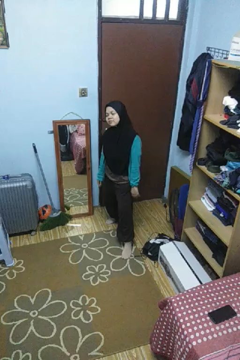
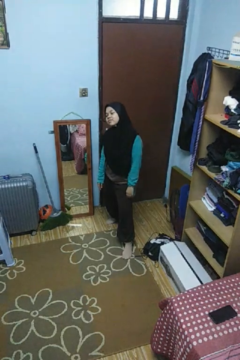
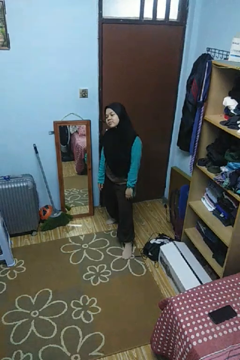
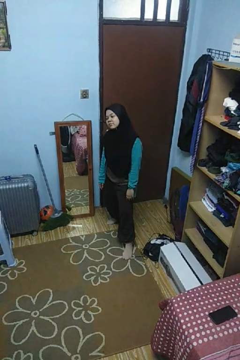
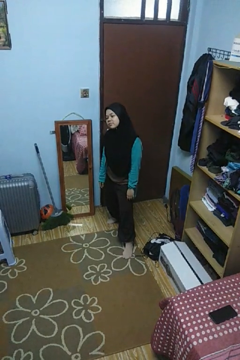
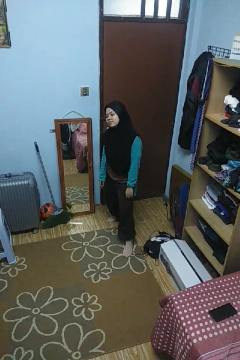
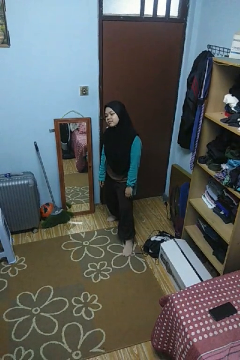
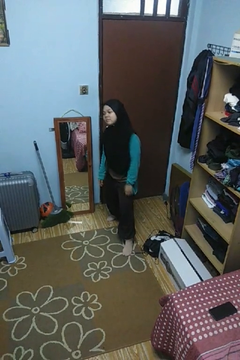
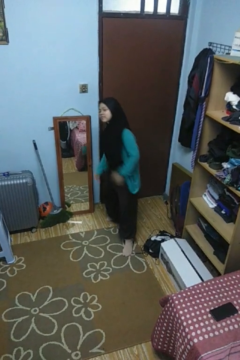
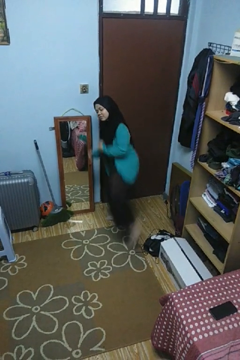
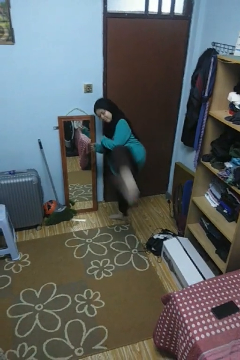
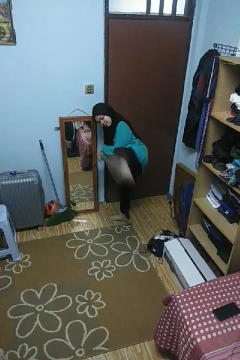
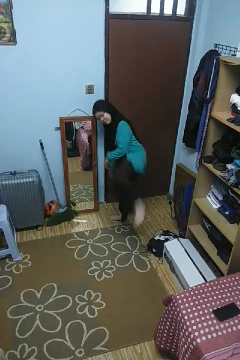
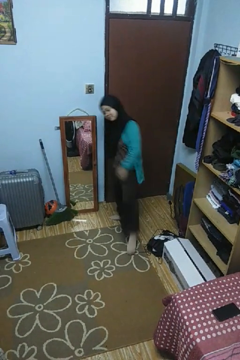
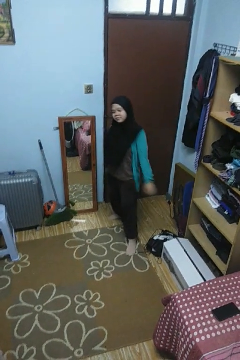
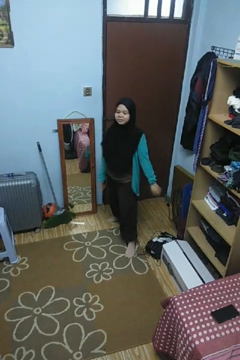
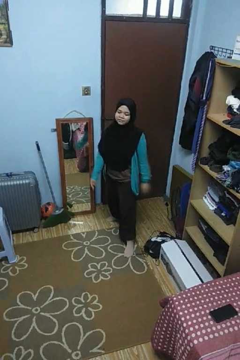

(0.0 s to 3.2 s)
person karate kicks

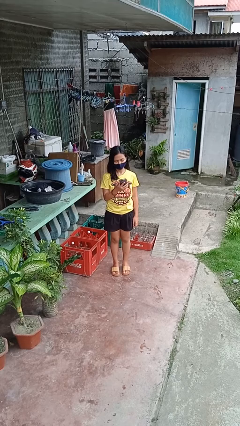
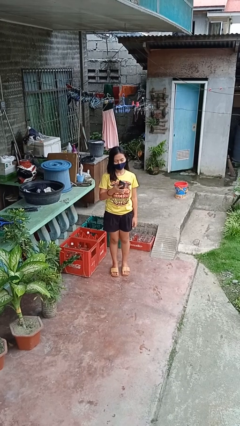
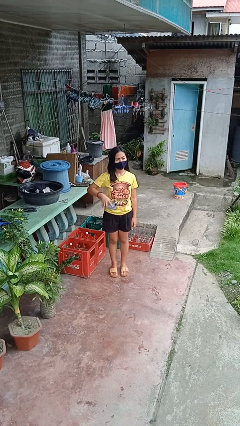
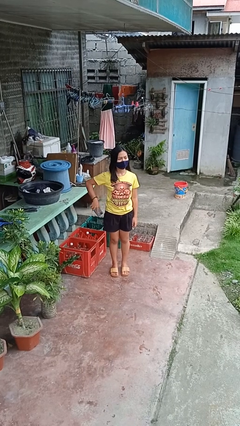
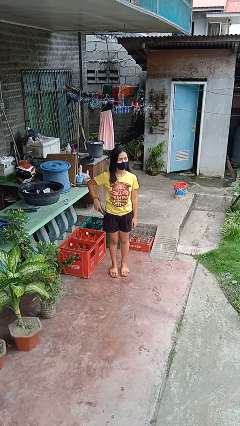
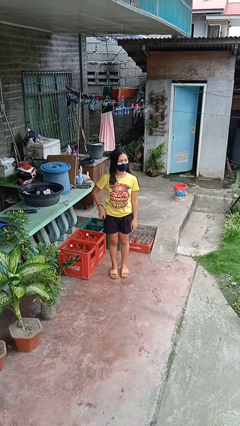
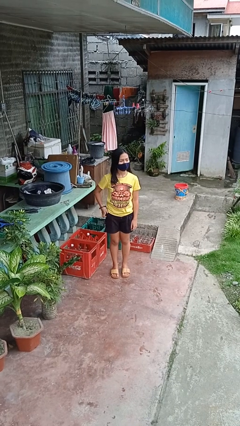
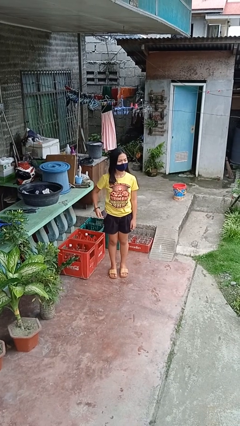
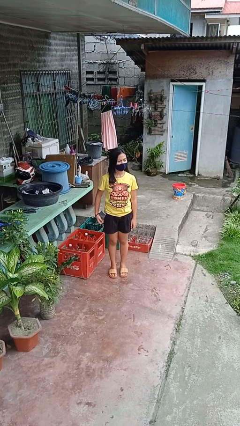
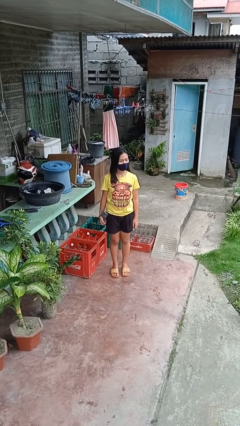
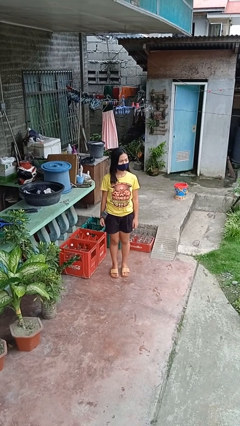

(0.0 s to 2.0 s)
person puts phone into pocket

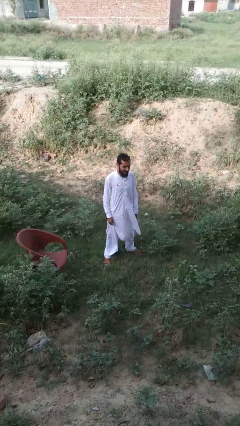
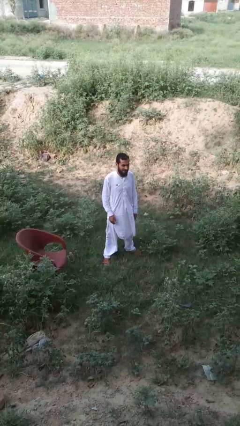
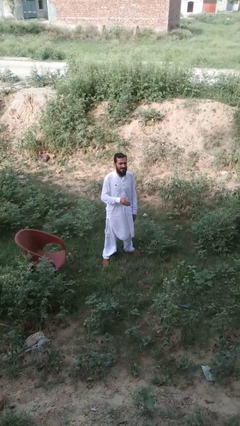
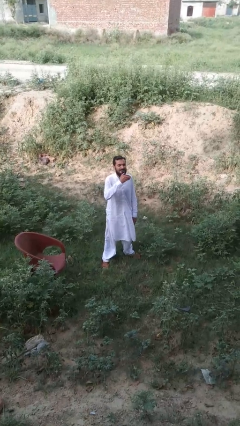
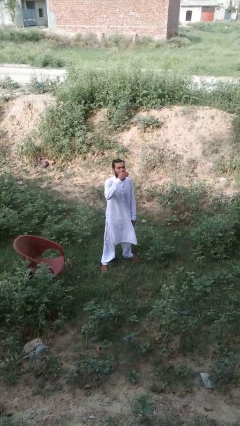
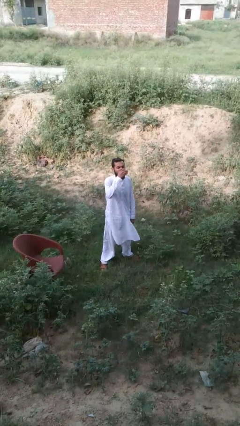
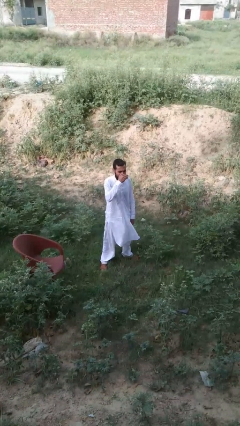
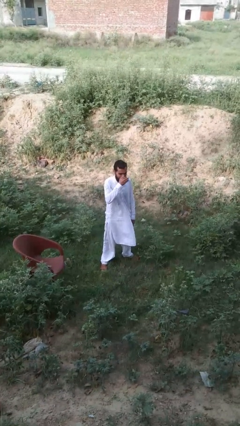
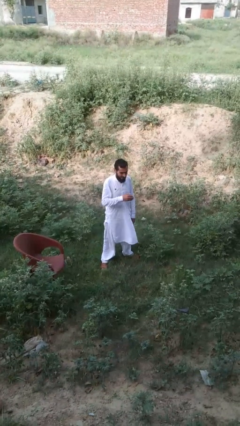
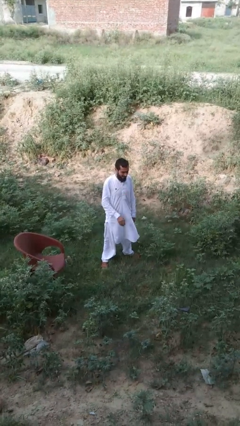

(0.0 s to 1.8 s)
person sneezes into hand

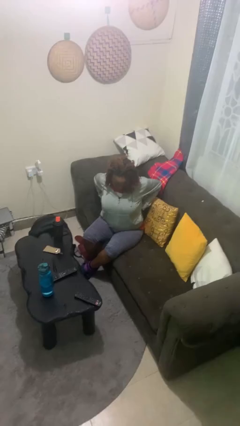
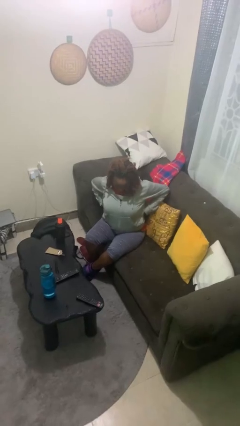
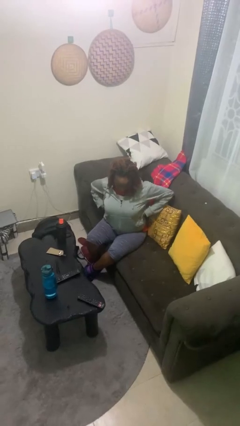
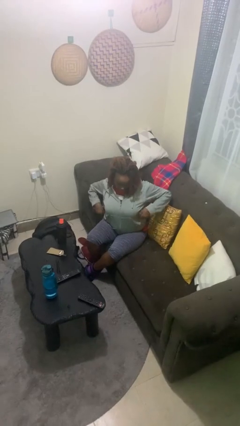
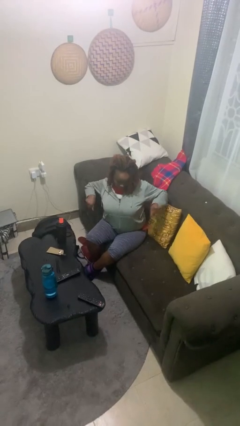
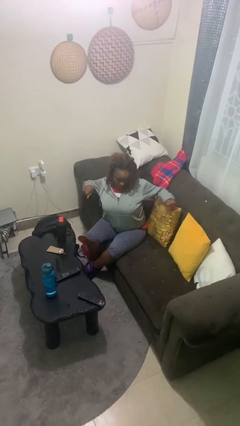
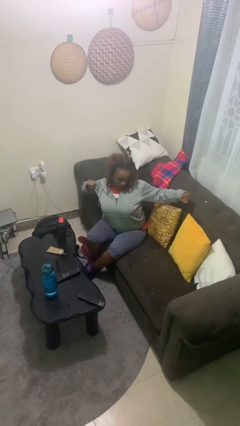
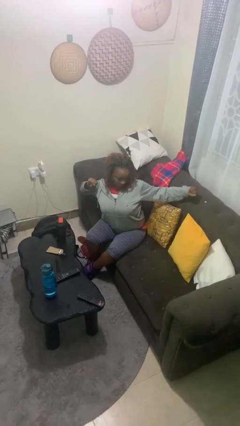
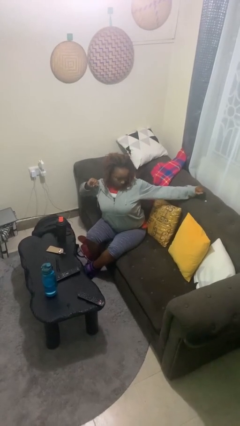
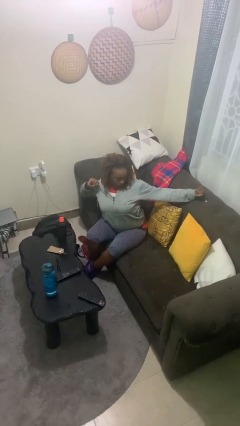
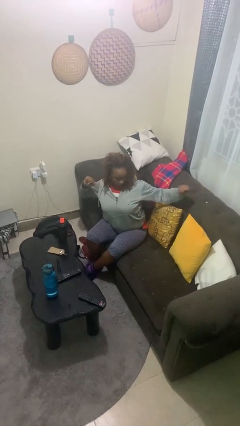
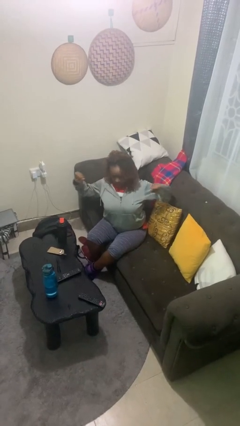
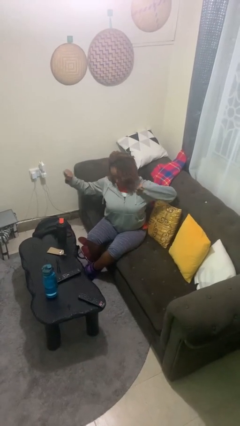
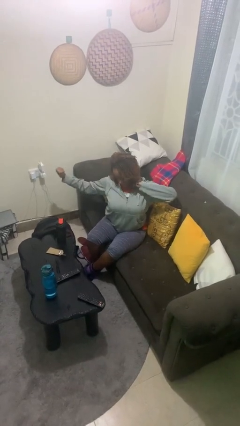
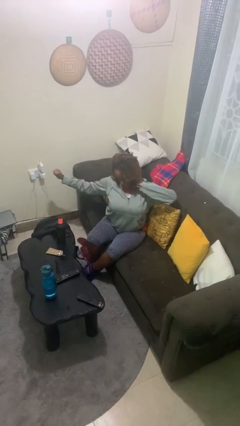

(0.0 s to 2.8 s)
person stretches arms to side

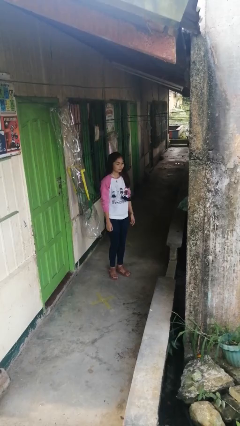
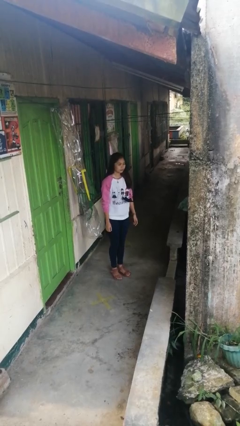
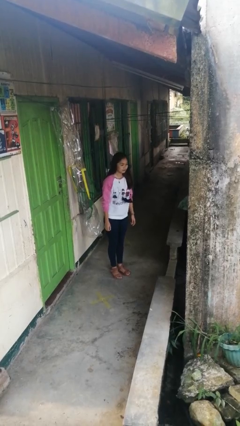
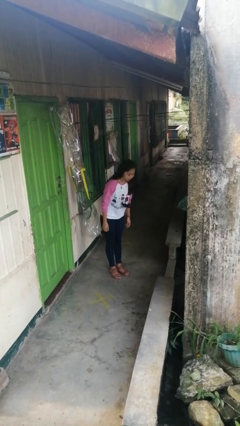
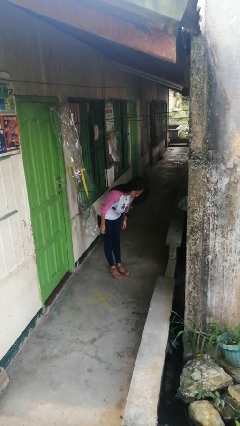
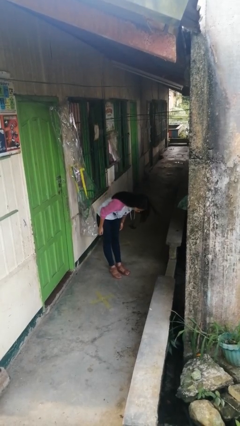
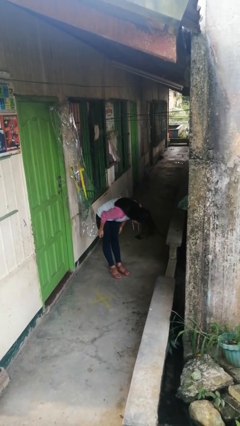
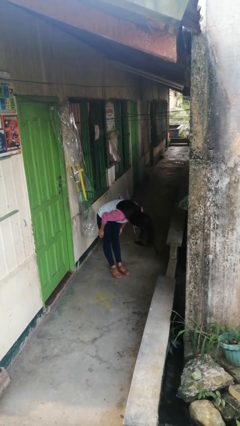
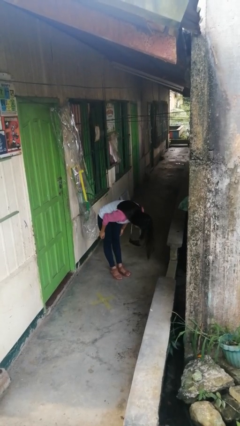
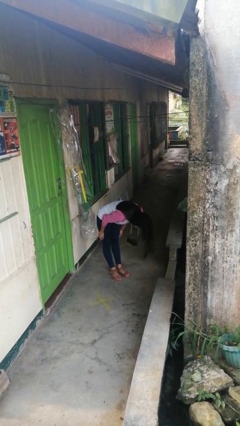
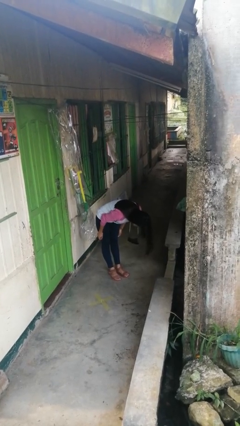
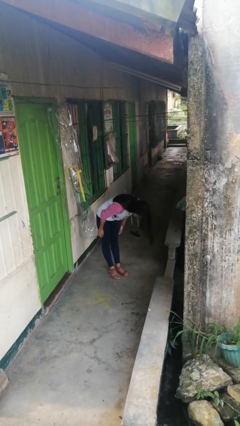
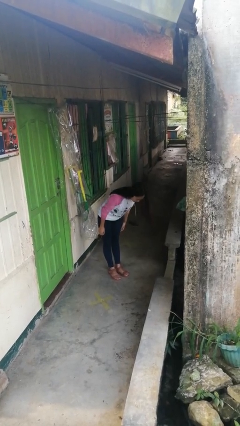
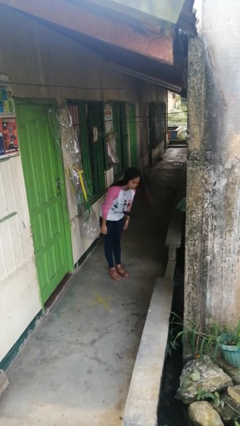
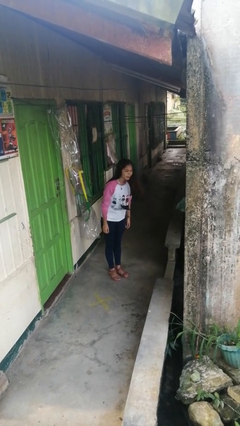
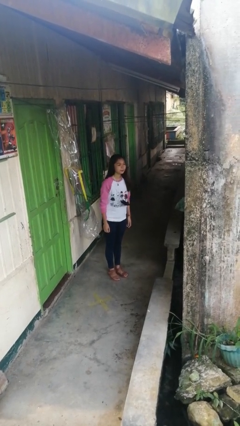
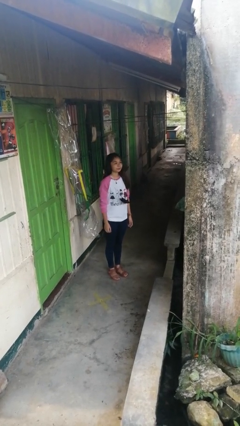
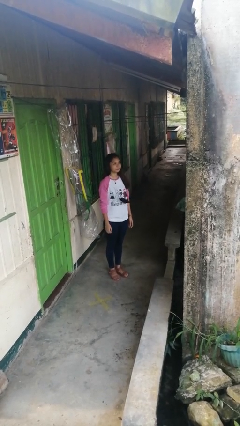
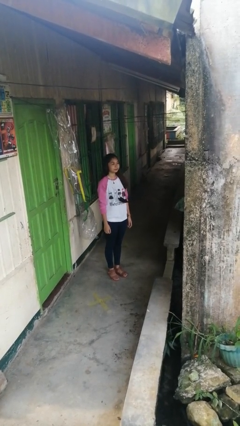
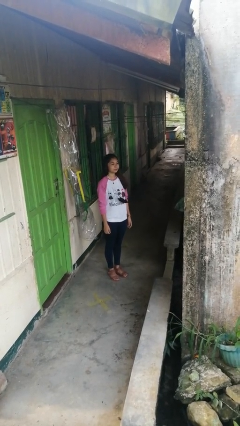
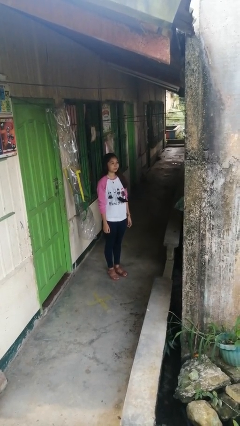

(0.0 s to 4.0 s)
person bows

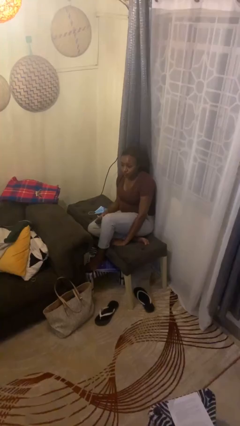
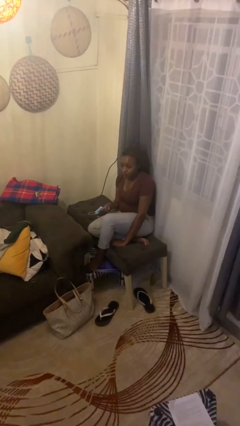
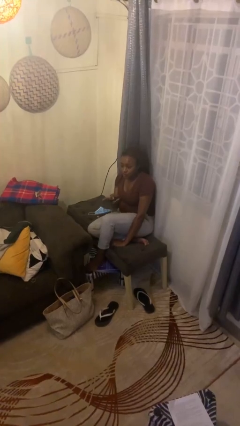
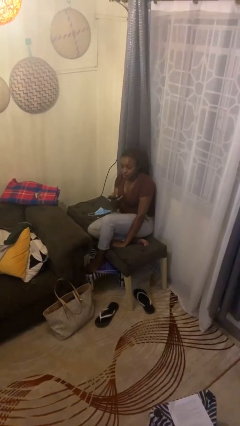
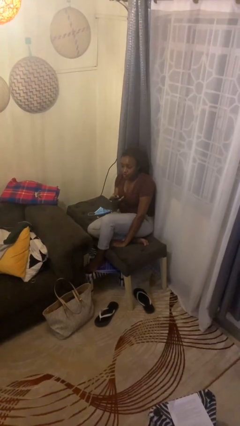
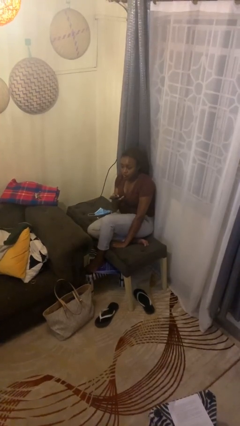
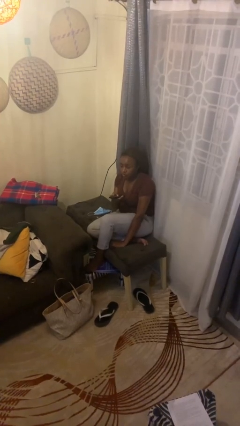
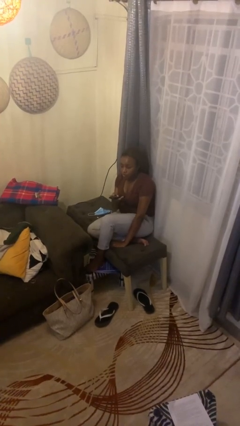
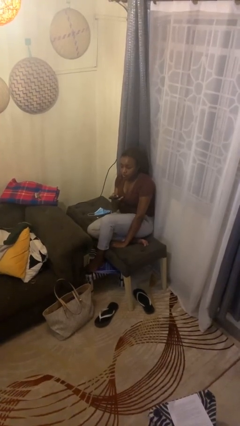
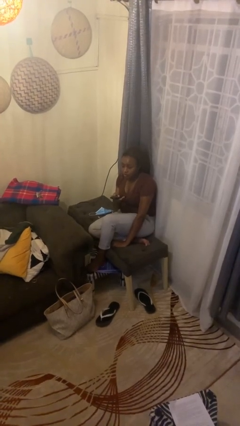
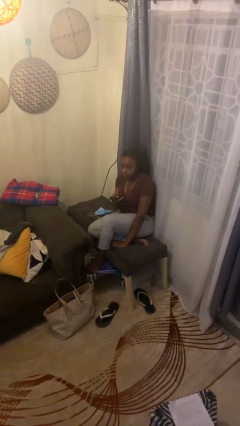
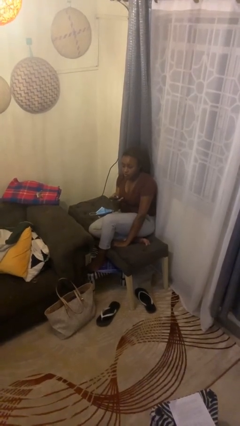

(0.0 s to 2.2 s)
person uses television remote

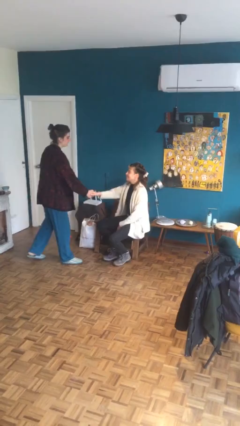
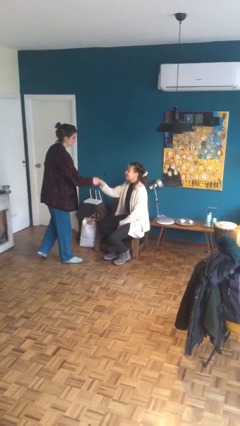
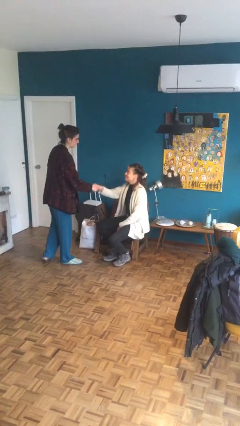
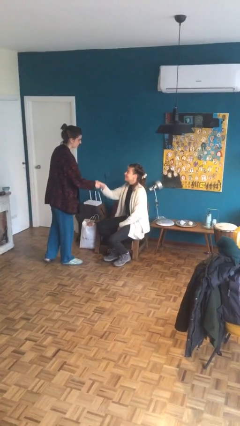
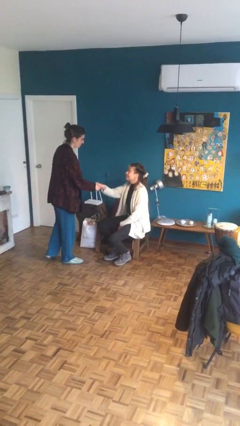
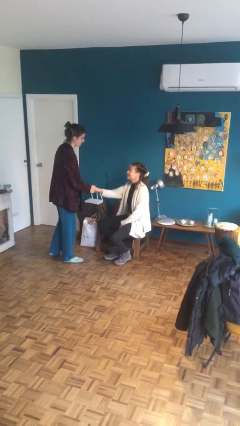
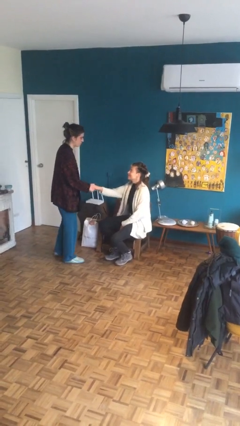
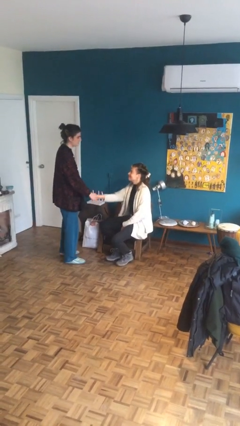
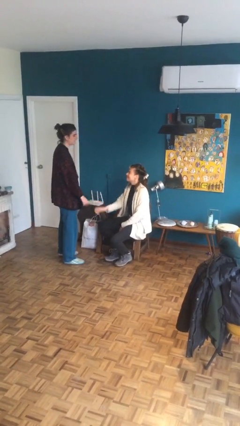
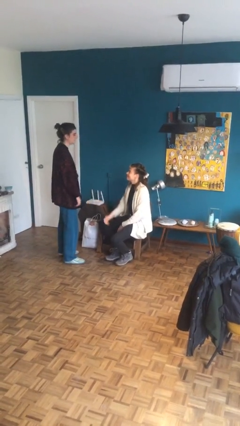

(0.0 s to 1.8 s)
person shakes hand

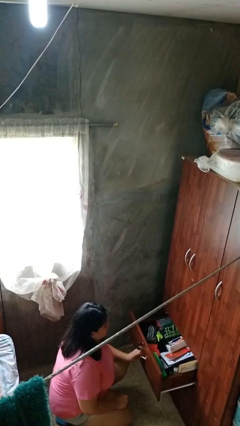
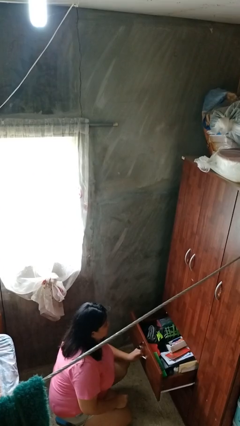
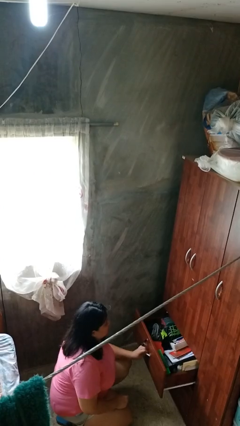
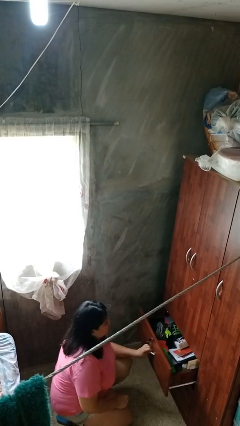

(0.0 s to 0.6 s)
person closes dresser drawer
